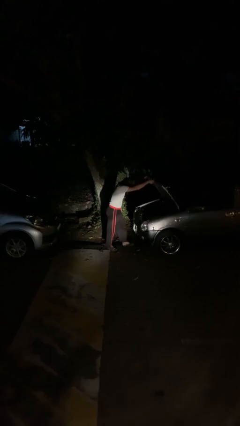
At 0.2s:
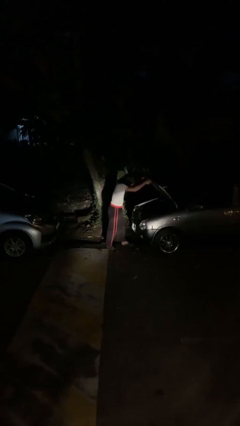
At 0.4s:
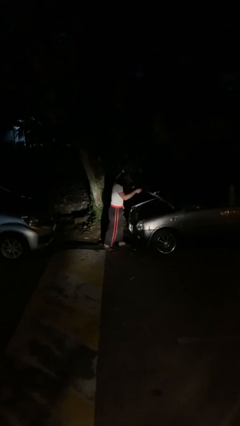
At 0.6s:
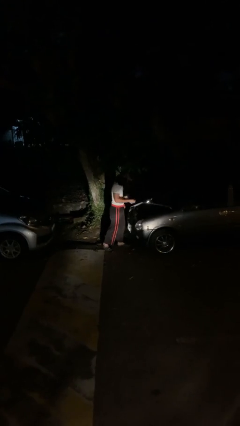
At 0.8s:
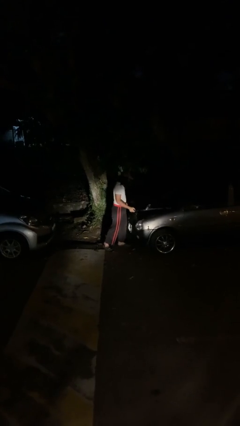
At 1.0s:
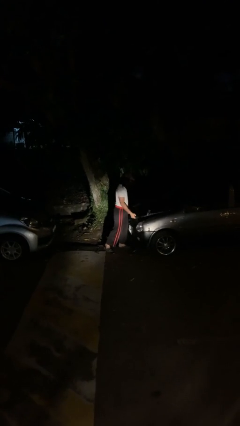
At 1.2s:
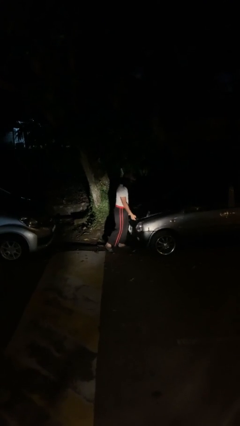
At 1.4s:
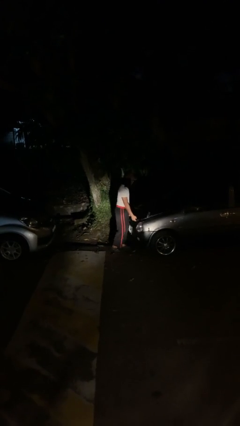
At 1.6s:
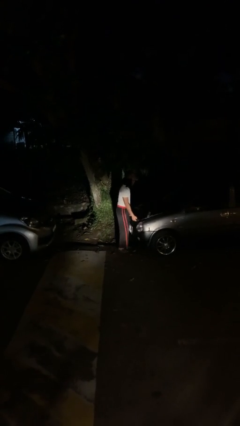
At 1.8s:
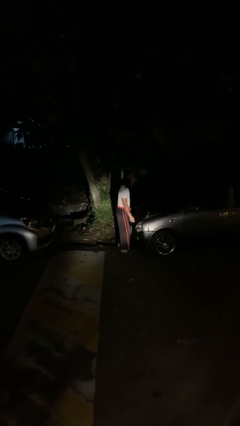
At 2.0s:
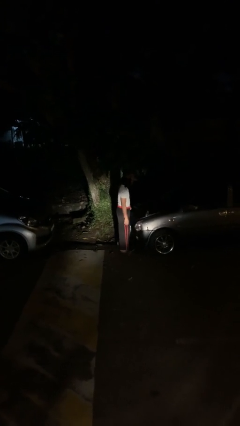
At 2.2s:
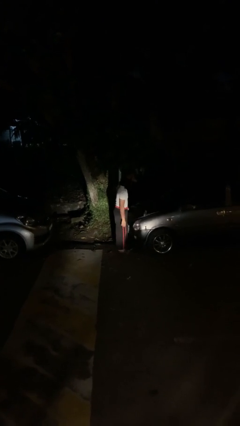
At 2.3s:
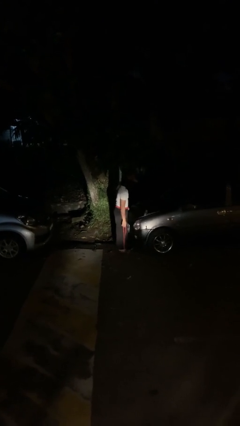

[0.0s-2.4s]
person closes car hood

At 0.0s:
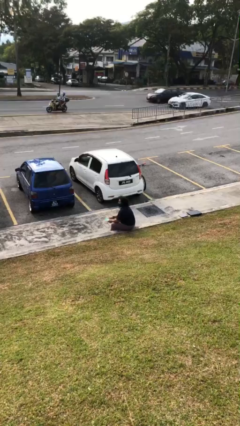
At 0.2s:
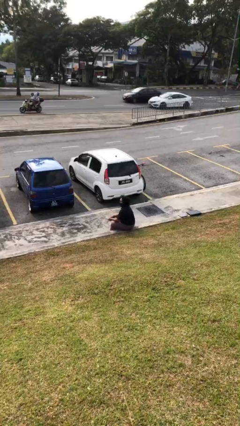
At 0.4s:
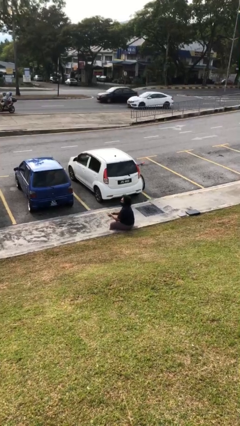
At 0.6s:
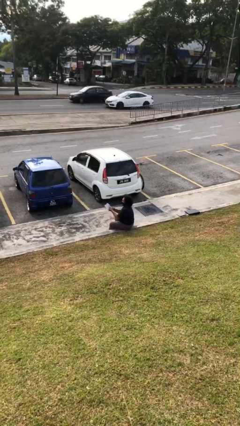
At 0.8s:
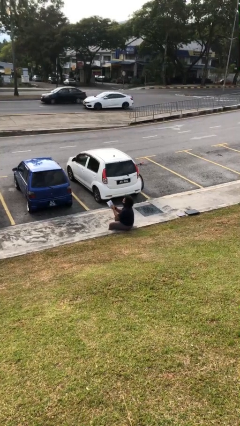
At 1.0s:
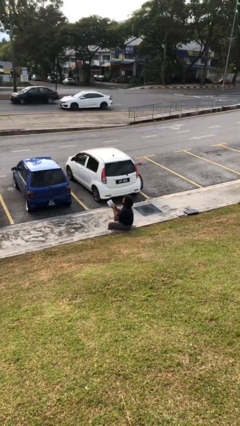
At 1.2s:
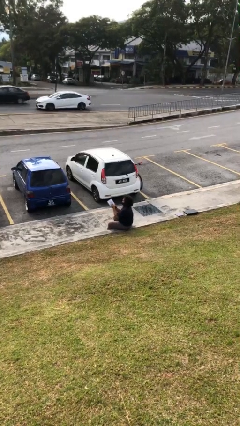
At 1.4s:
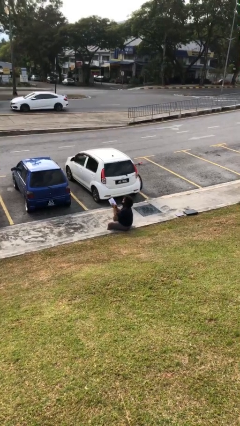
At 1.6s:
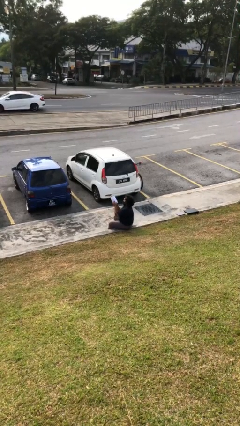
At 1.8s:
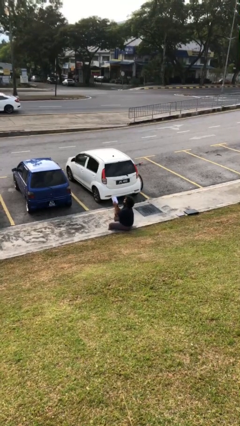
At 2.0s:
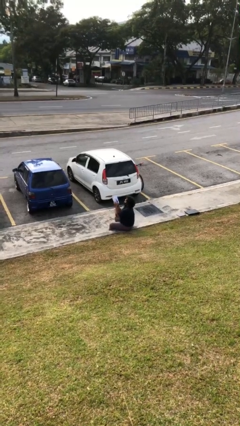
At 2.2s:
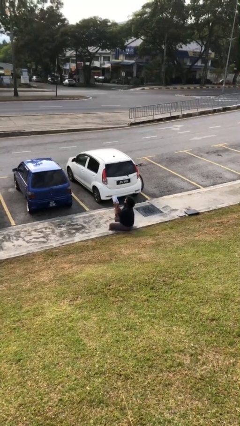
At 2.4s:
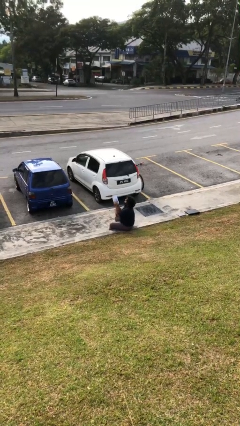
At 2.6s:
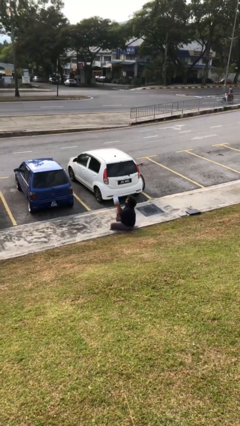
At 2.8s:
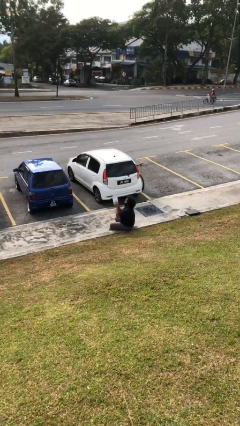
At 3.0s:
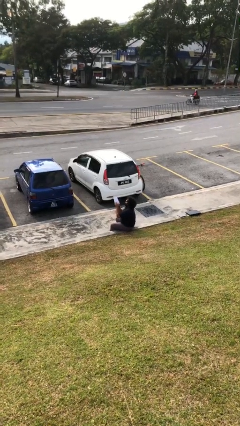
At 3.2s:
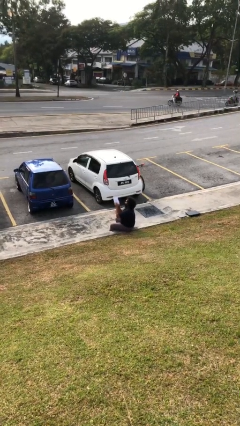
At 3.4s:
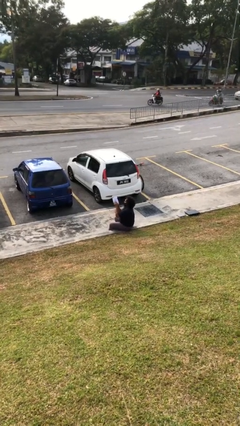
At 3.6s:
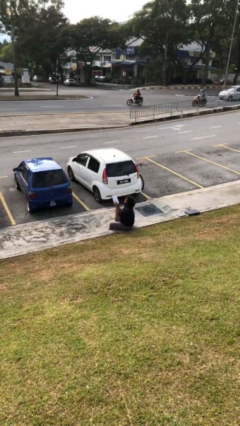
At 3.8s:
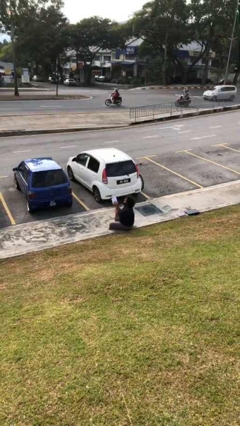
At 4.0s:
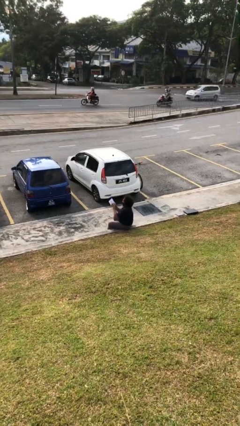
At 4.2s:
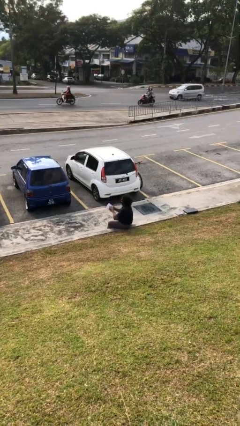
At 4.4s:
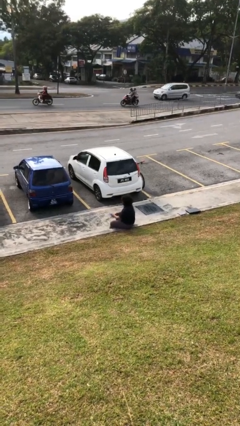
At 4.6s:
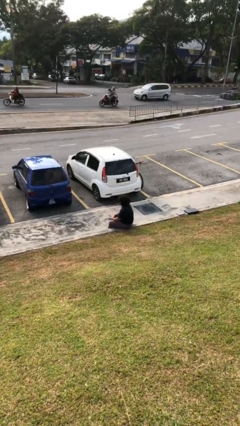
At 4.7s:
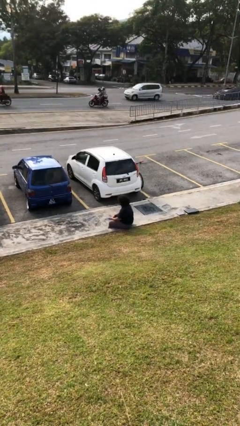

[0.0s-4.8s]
person reads document

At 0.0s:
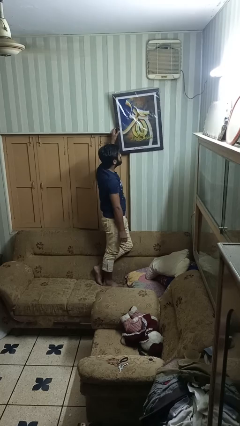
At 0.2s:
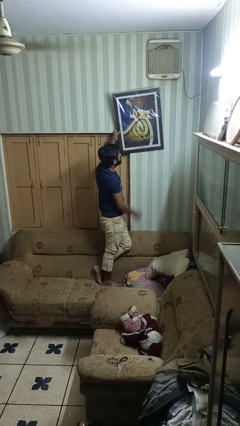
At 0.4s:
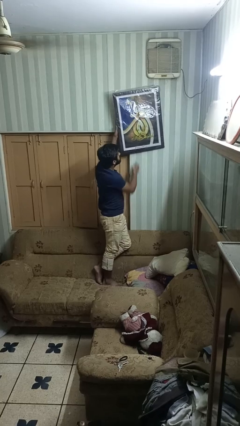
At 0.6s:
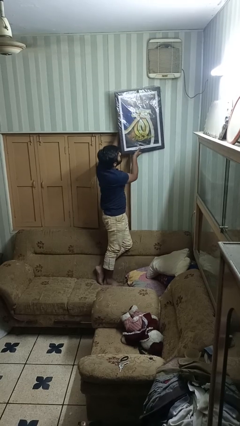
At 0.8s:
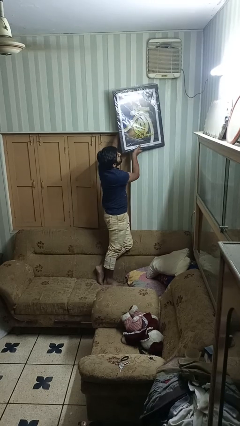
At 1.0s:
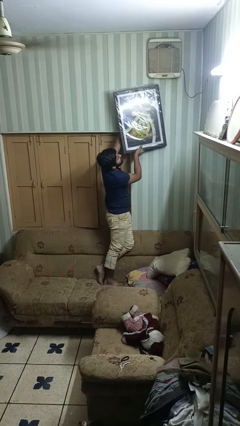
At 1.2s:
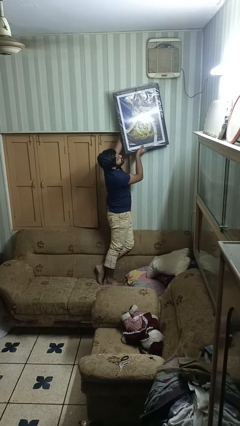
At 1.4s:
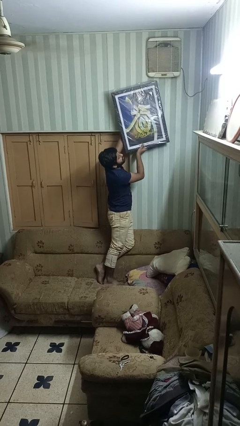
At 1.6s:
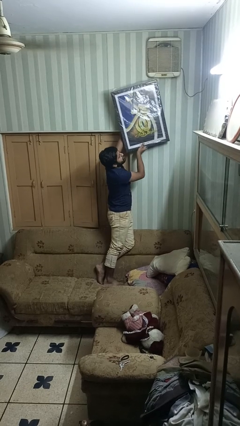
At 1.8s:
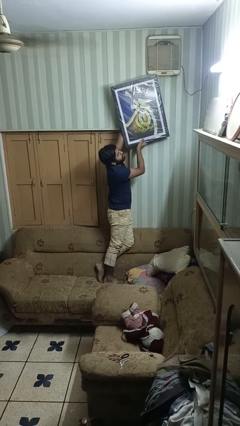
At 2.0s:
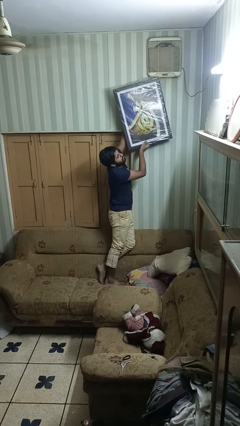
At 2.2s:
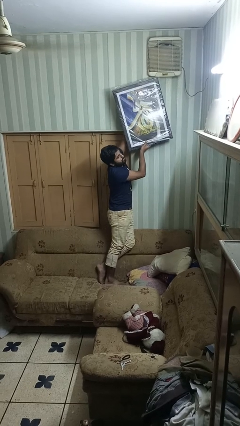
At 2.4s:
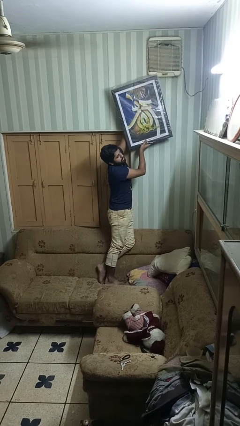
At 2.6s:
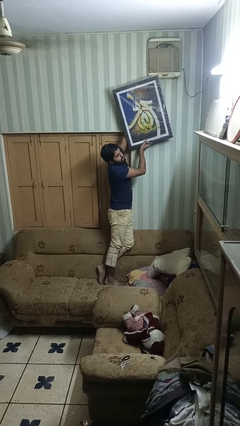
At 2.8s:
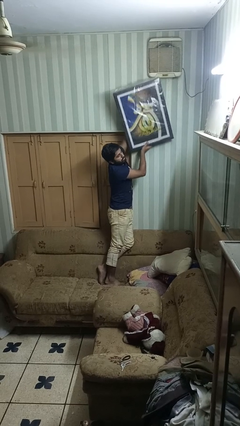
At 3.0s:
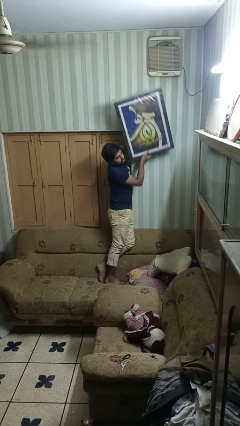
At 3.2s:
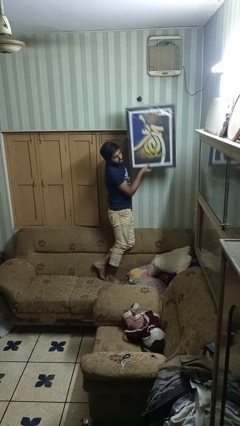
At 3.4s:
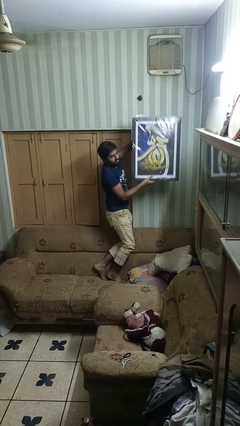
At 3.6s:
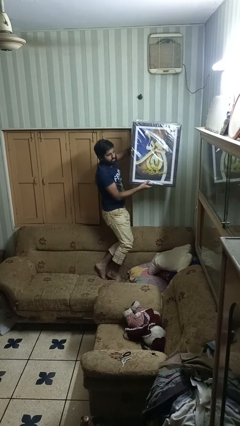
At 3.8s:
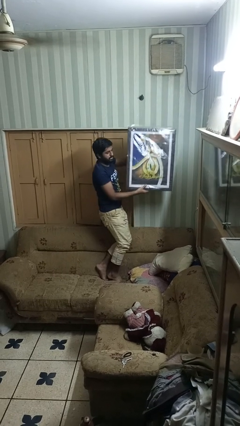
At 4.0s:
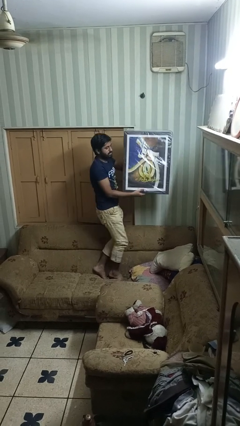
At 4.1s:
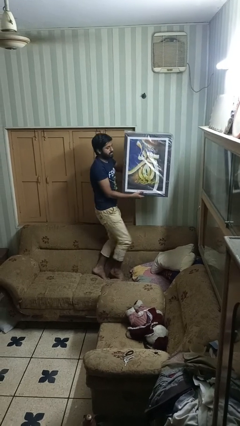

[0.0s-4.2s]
person takes down picture frame

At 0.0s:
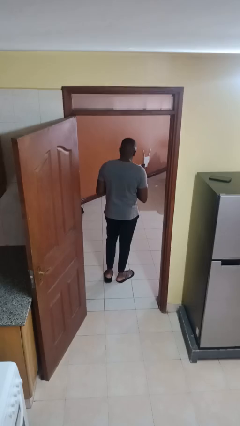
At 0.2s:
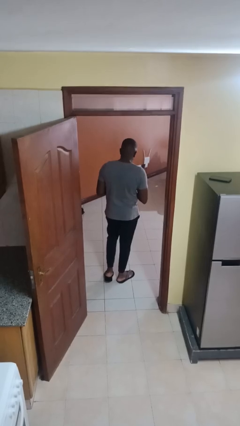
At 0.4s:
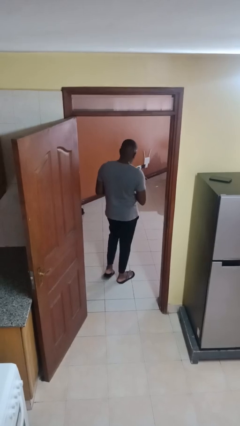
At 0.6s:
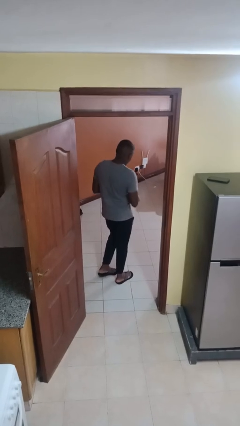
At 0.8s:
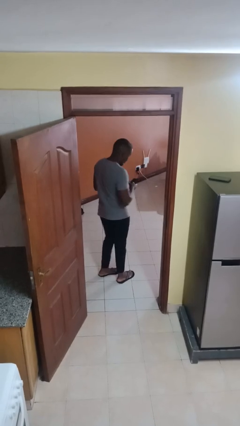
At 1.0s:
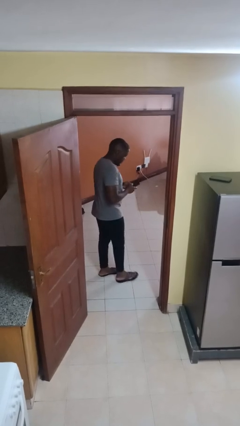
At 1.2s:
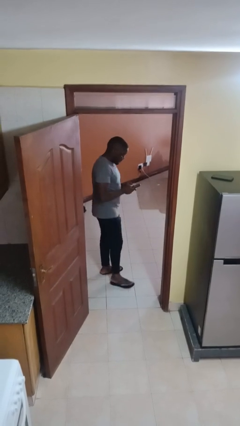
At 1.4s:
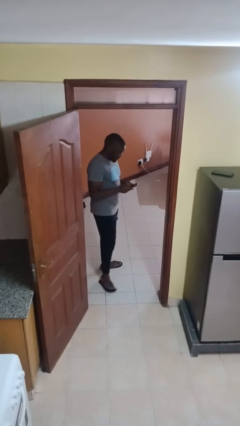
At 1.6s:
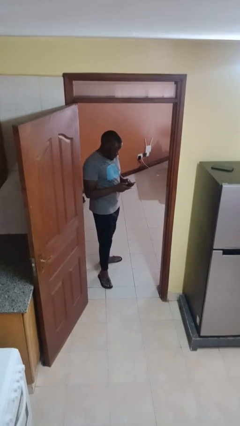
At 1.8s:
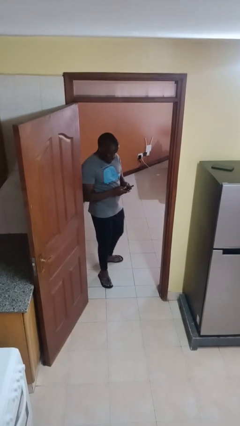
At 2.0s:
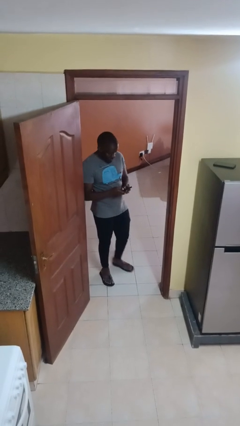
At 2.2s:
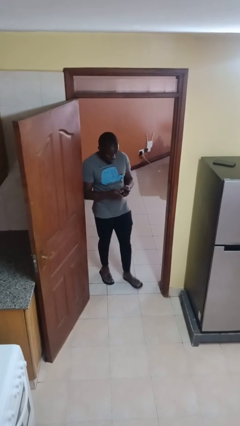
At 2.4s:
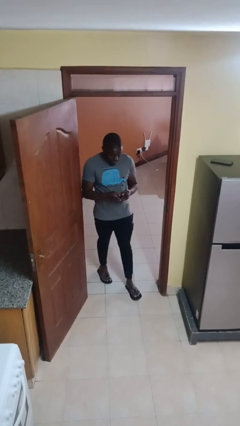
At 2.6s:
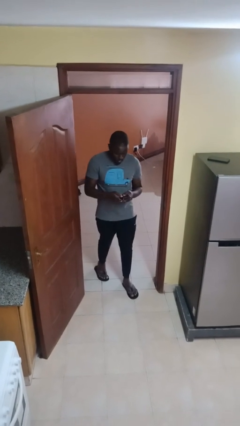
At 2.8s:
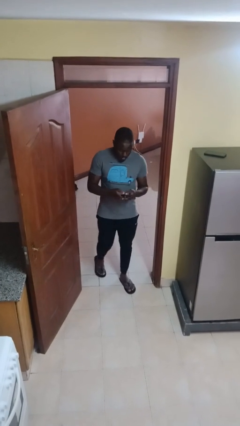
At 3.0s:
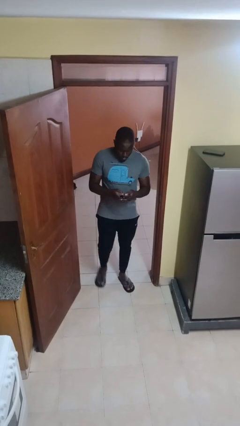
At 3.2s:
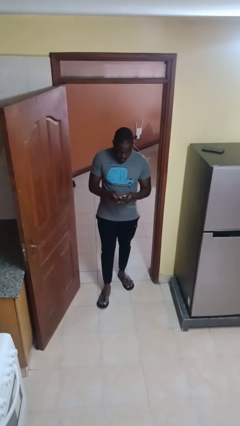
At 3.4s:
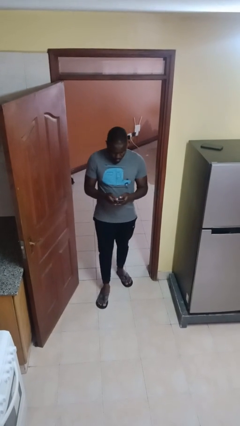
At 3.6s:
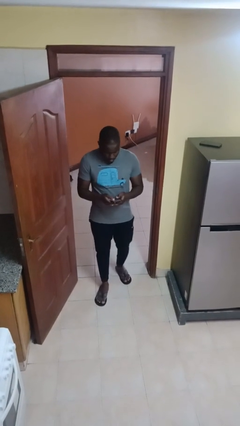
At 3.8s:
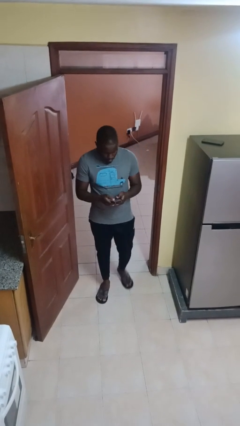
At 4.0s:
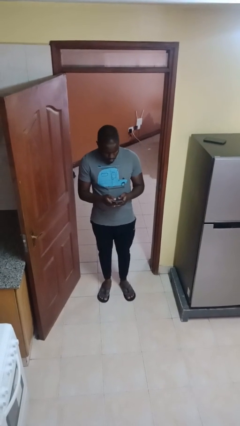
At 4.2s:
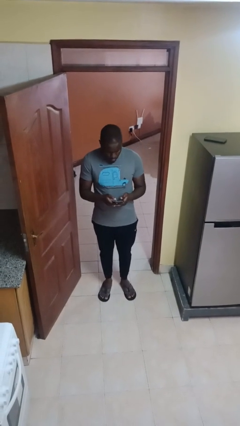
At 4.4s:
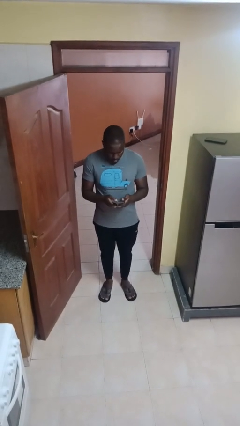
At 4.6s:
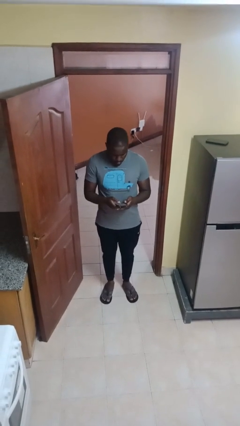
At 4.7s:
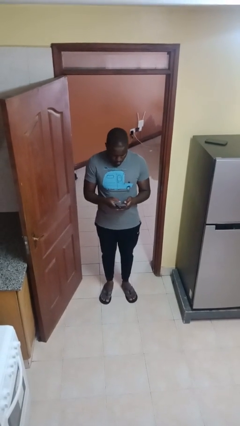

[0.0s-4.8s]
person enters scene through structure

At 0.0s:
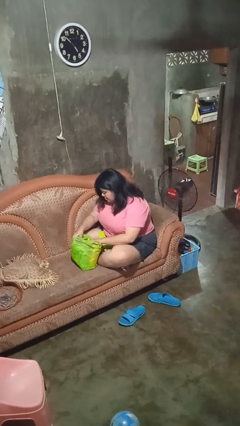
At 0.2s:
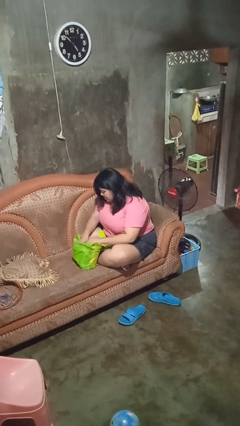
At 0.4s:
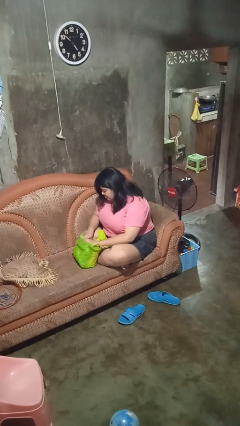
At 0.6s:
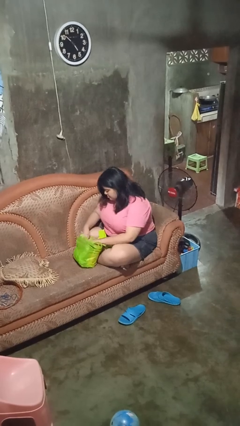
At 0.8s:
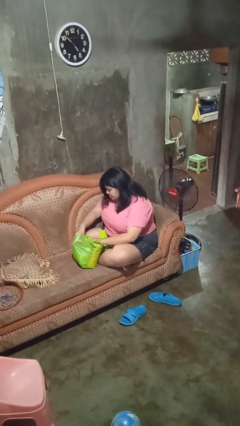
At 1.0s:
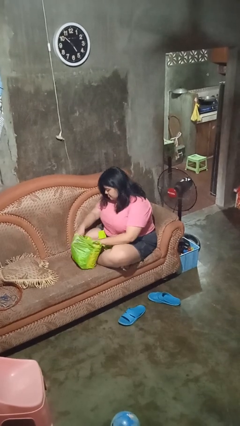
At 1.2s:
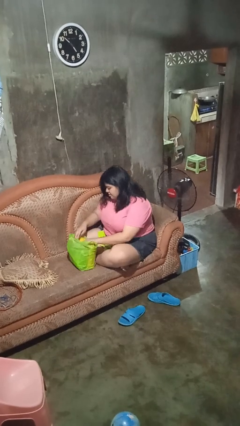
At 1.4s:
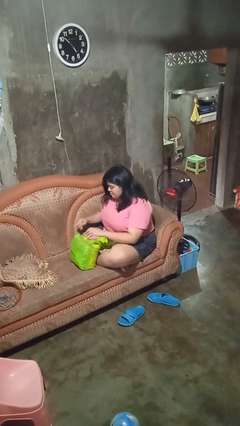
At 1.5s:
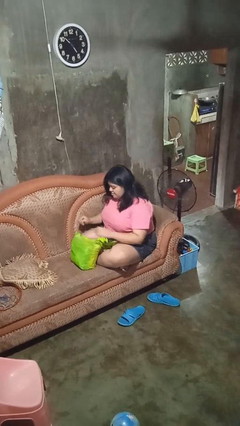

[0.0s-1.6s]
person searches in bag
